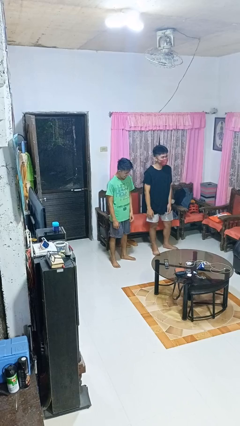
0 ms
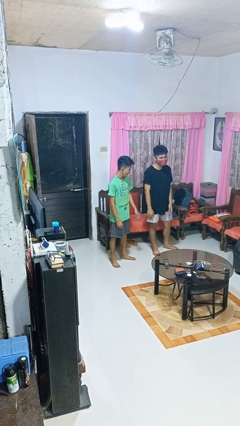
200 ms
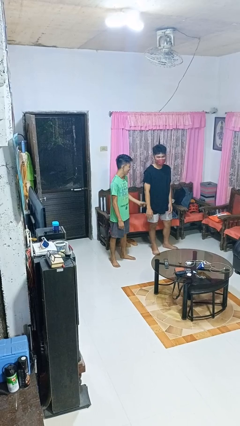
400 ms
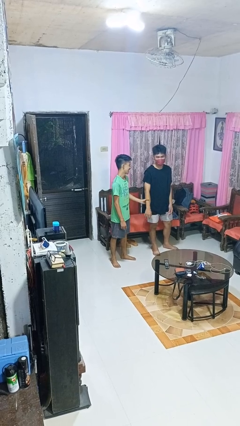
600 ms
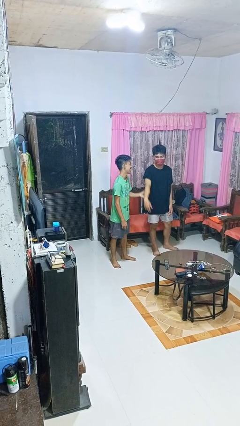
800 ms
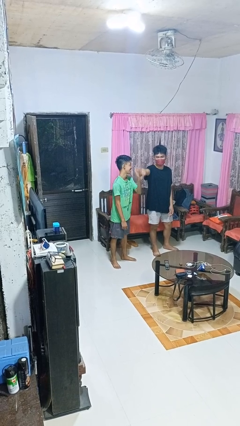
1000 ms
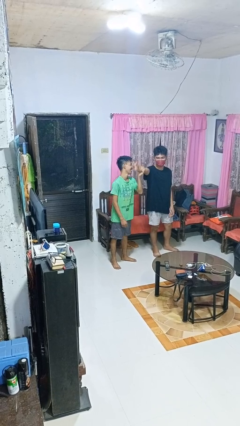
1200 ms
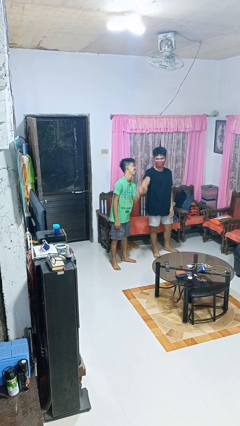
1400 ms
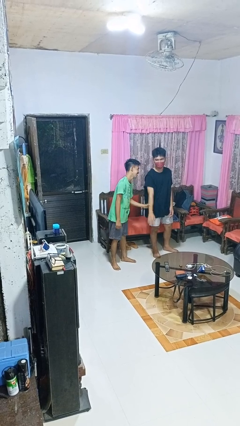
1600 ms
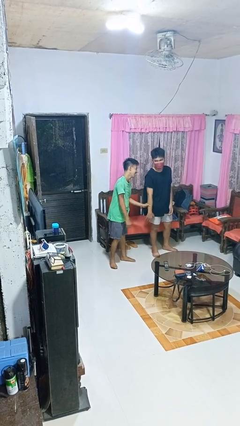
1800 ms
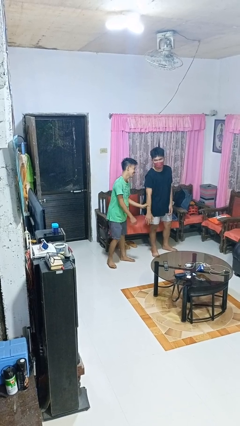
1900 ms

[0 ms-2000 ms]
person grabs person by forearm

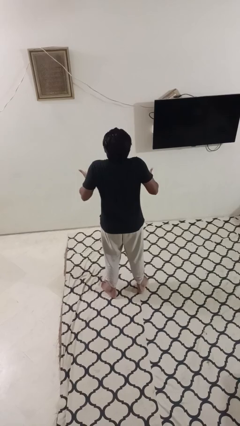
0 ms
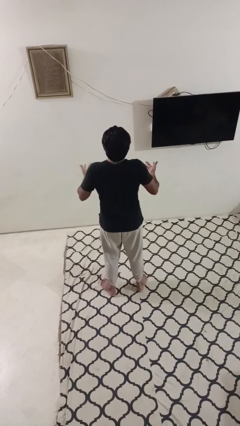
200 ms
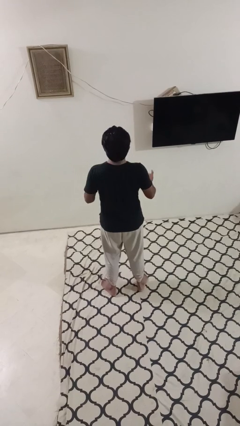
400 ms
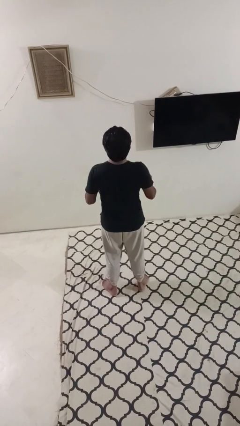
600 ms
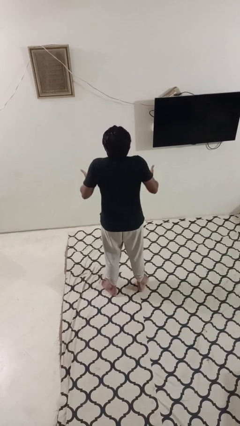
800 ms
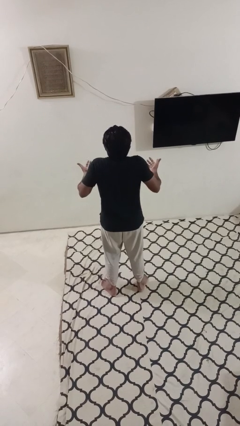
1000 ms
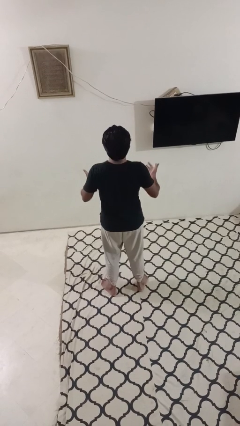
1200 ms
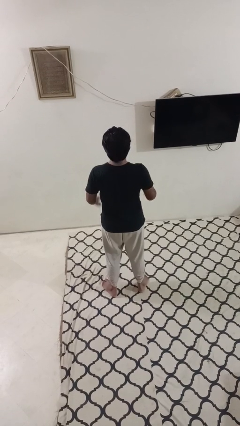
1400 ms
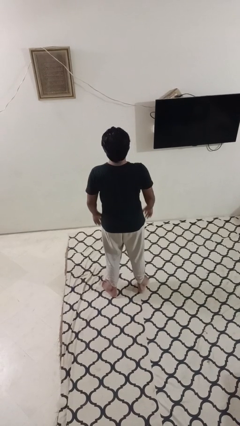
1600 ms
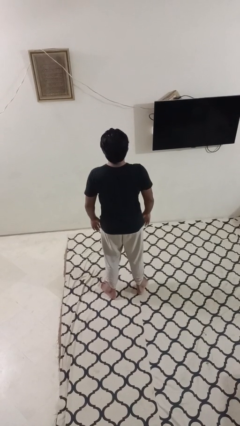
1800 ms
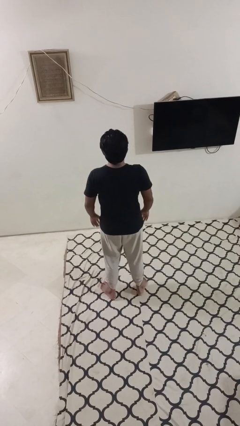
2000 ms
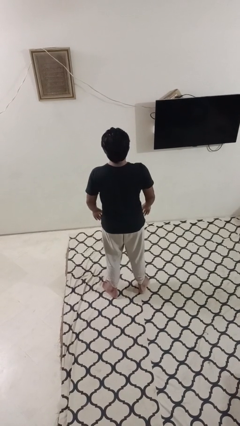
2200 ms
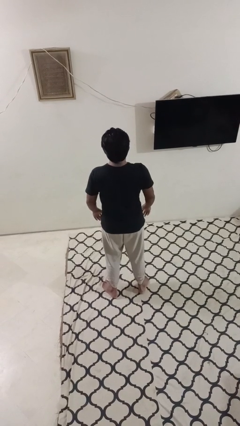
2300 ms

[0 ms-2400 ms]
person shrugs

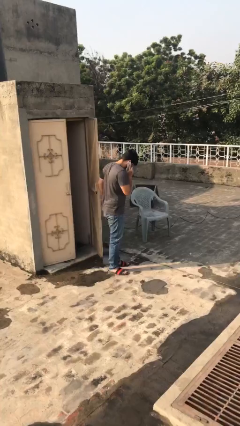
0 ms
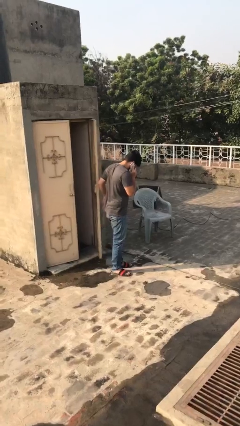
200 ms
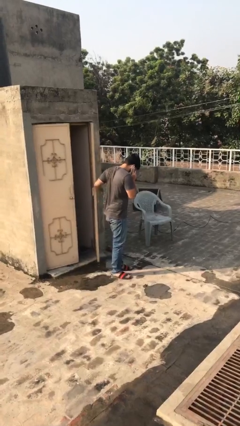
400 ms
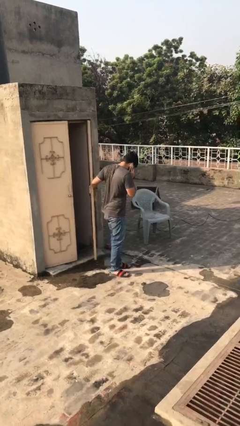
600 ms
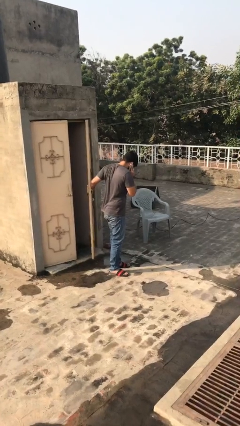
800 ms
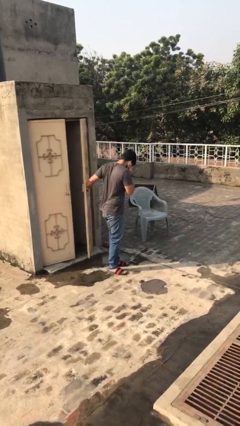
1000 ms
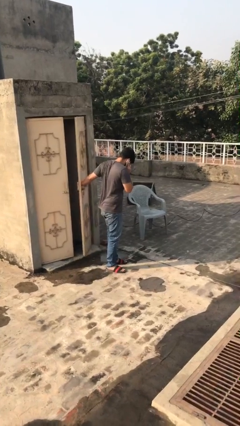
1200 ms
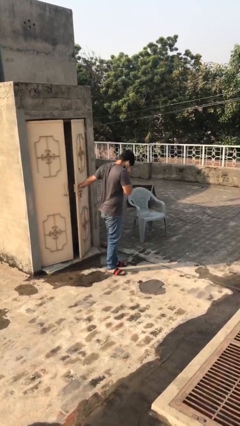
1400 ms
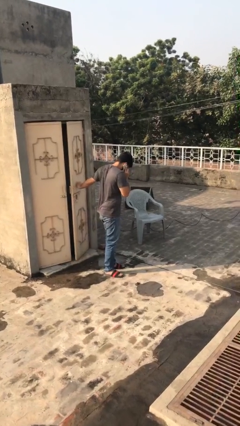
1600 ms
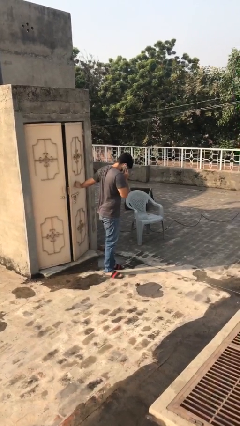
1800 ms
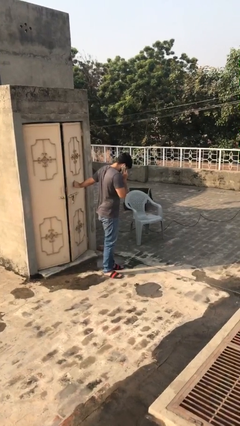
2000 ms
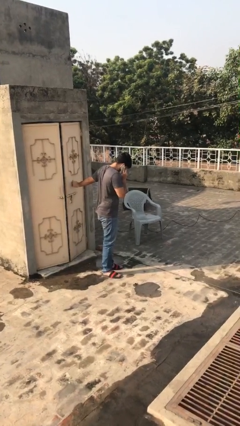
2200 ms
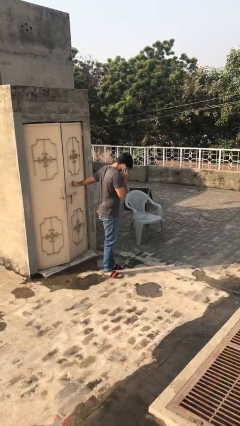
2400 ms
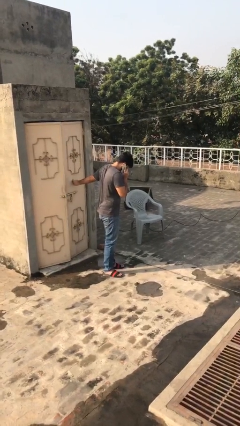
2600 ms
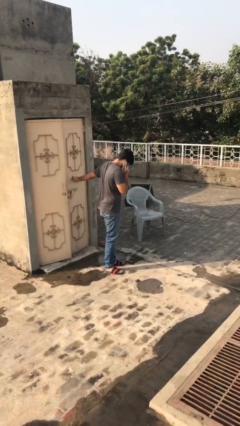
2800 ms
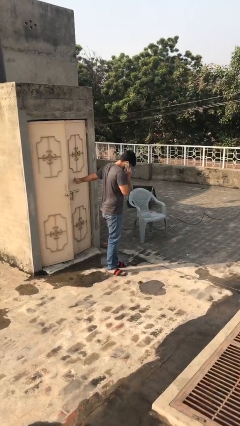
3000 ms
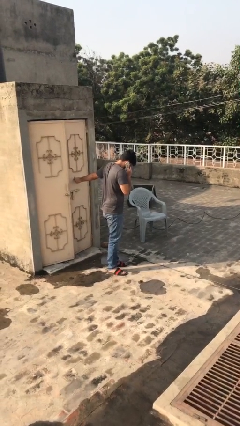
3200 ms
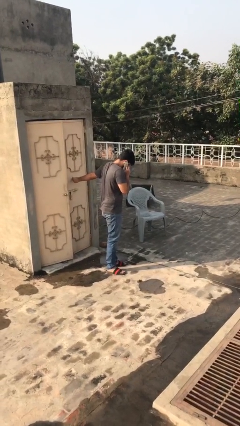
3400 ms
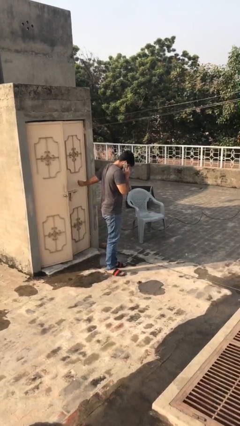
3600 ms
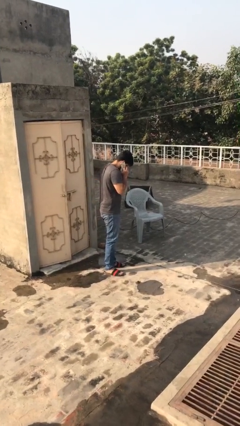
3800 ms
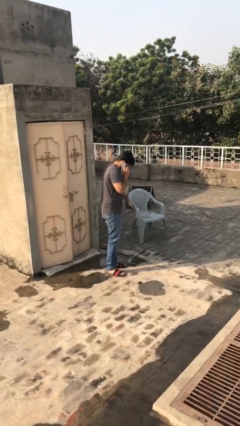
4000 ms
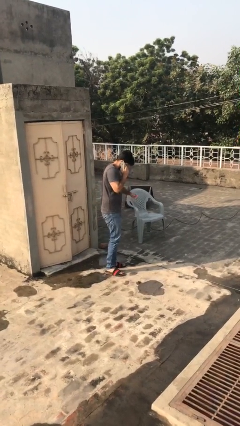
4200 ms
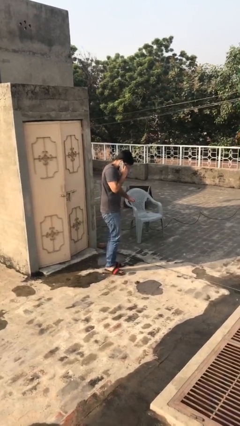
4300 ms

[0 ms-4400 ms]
person closes facility door

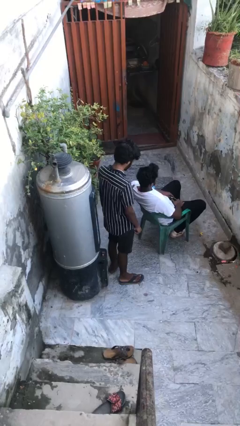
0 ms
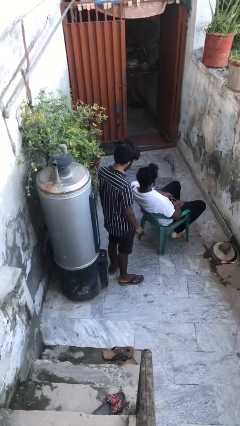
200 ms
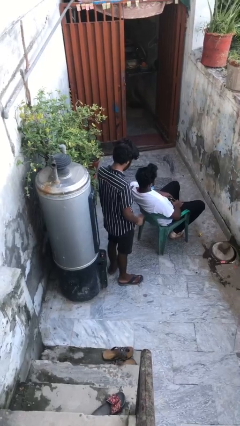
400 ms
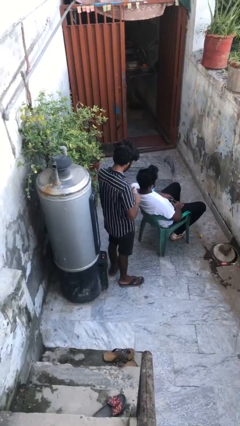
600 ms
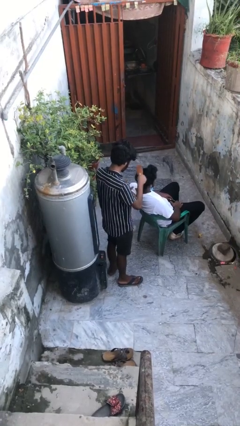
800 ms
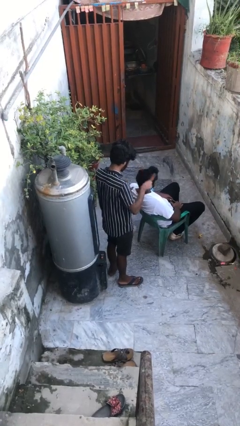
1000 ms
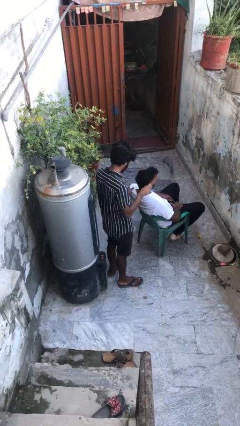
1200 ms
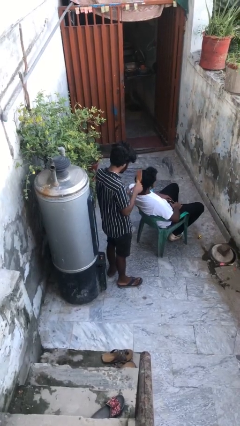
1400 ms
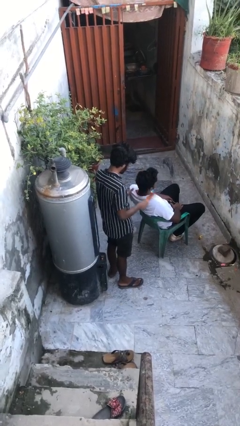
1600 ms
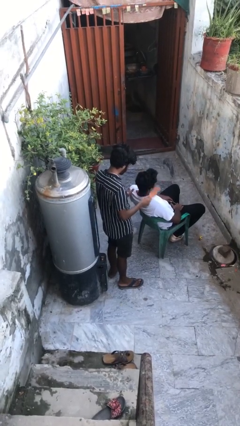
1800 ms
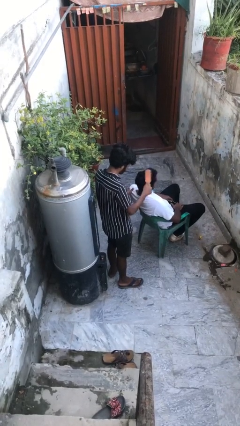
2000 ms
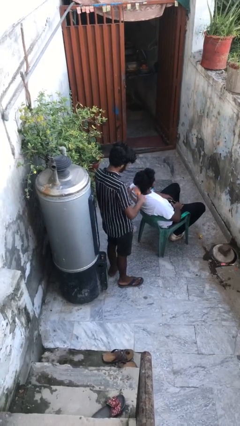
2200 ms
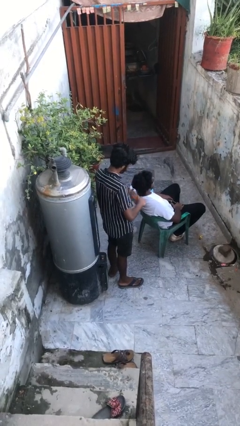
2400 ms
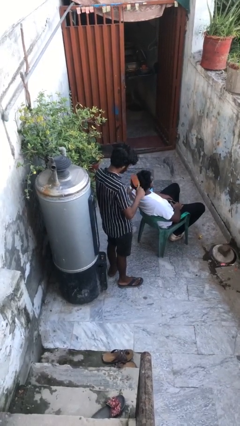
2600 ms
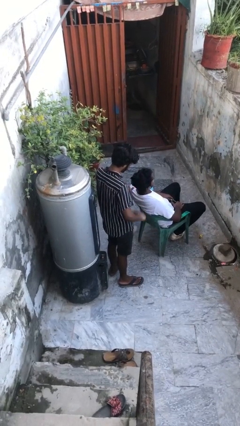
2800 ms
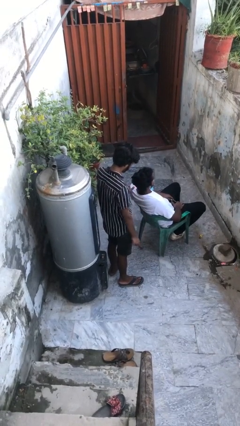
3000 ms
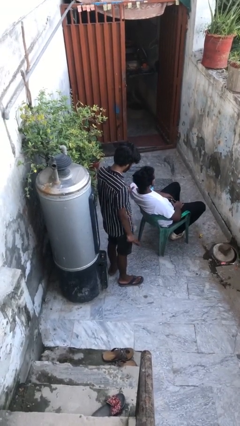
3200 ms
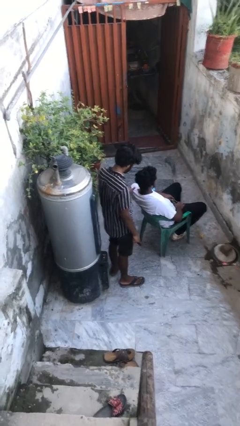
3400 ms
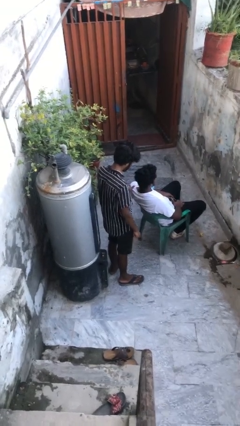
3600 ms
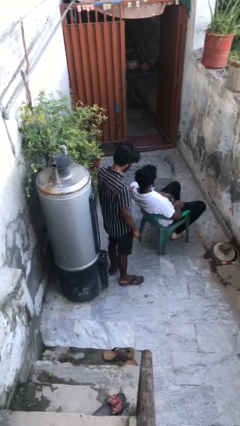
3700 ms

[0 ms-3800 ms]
person brushes hair of person

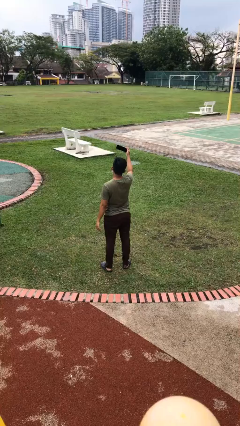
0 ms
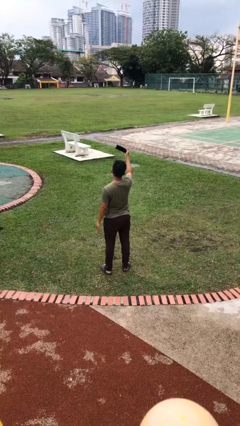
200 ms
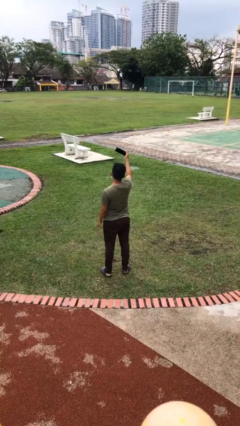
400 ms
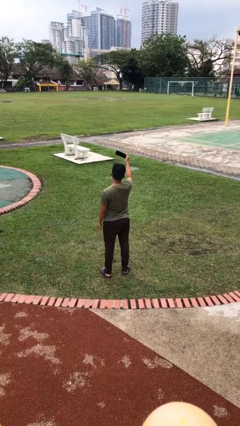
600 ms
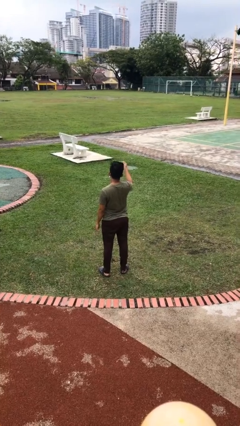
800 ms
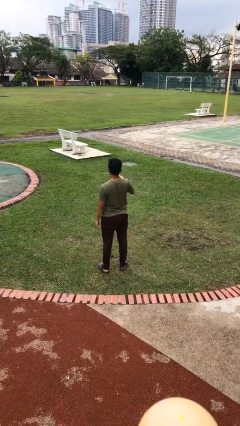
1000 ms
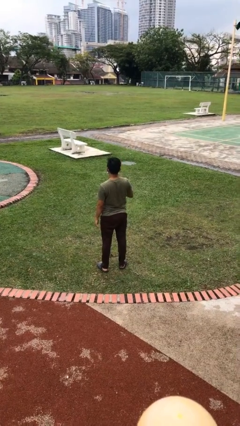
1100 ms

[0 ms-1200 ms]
person takes selfie

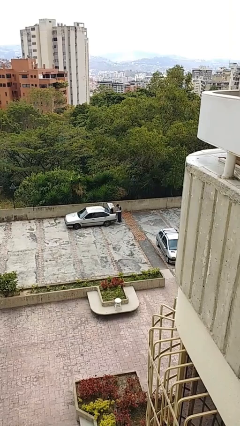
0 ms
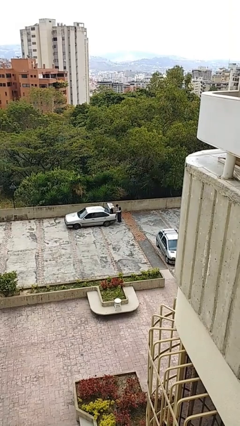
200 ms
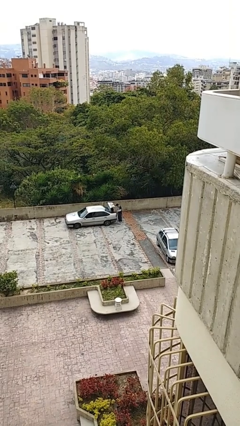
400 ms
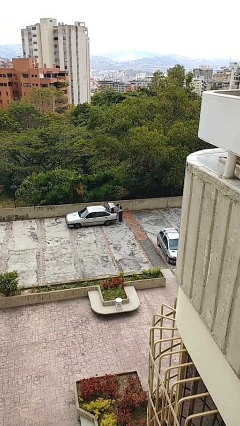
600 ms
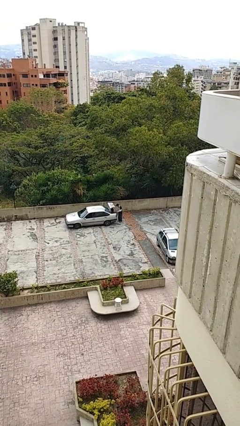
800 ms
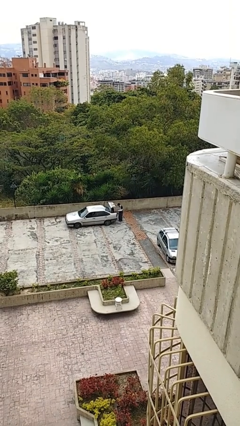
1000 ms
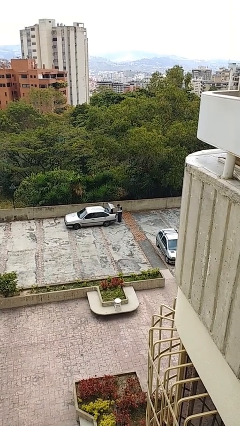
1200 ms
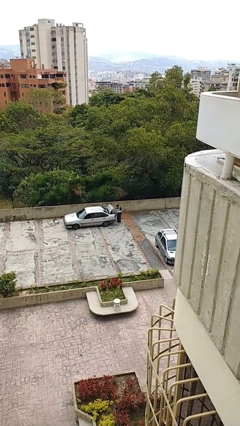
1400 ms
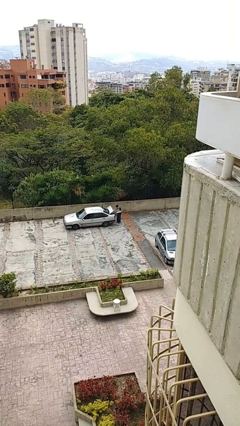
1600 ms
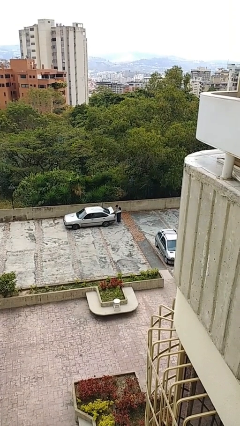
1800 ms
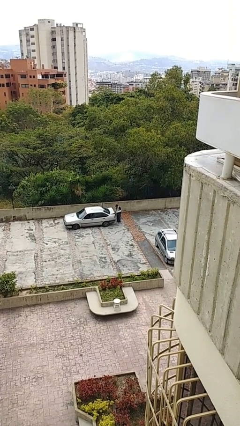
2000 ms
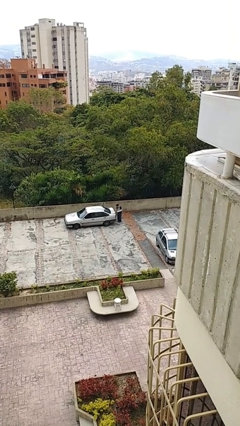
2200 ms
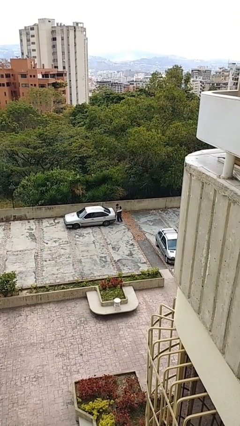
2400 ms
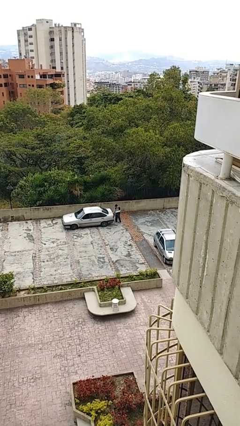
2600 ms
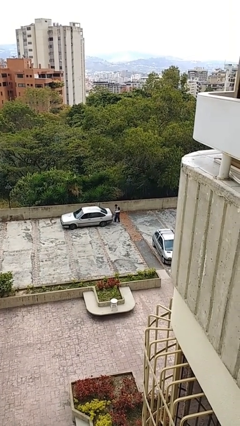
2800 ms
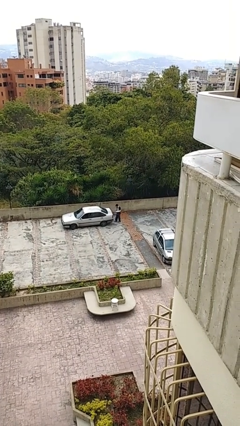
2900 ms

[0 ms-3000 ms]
person closes car trunk

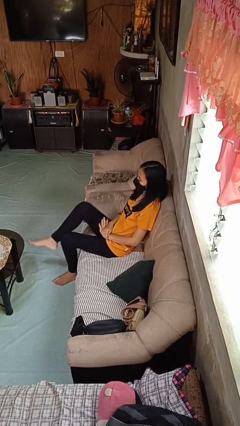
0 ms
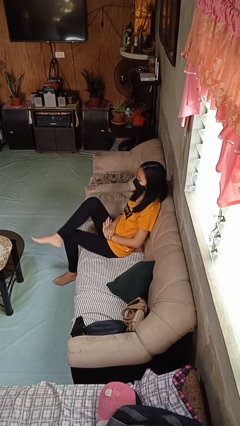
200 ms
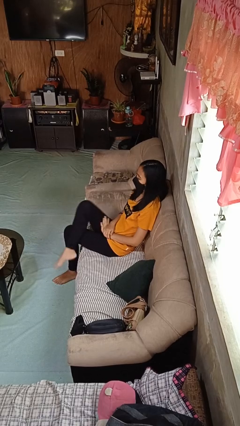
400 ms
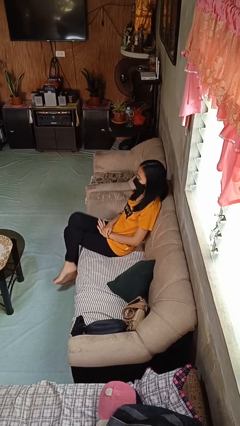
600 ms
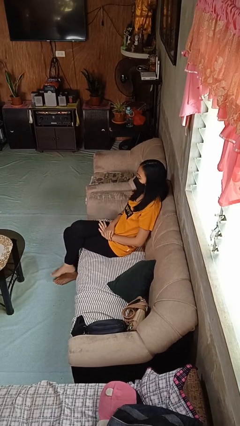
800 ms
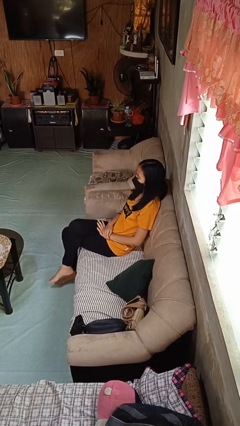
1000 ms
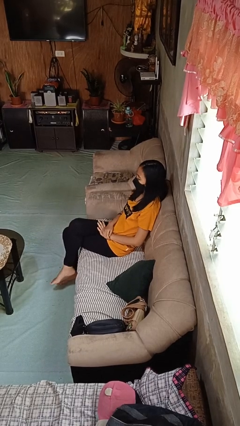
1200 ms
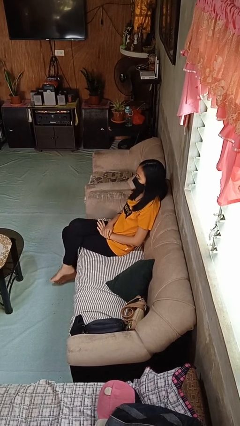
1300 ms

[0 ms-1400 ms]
person crosses legs
